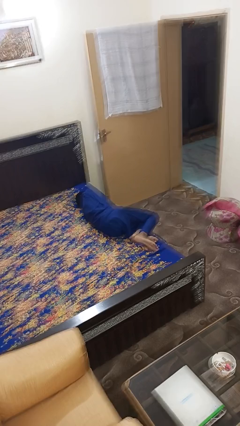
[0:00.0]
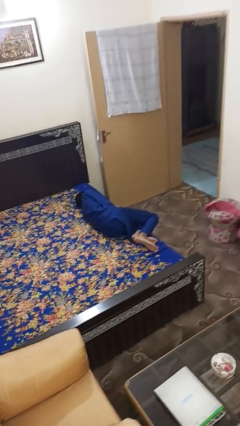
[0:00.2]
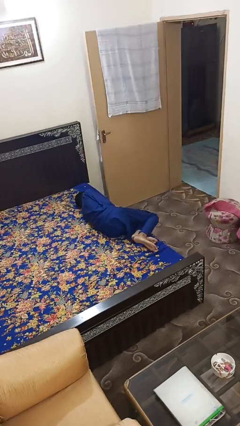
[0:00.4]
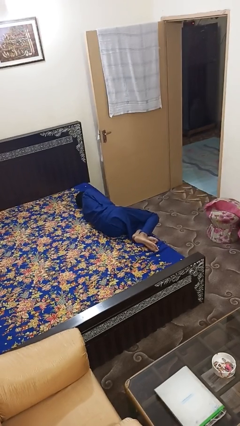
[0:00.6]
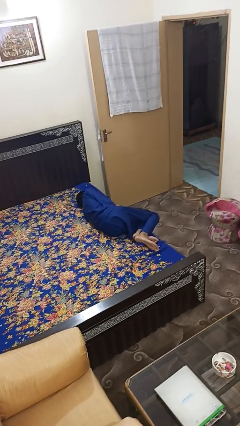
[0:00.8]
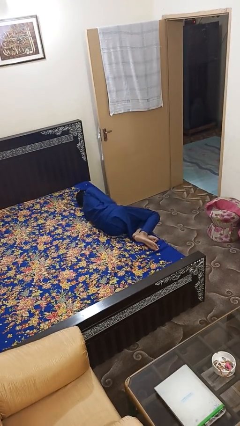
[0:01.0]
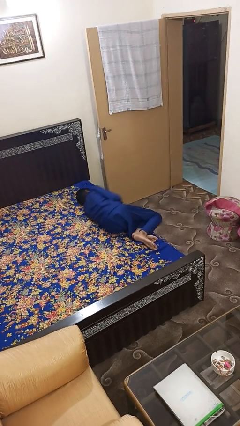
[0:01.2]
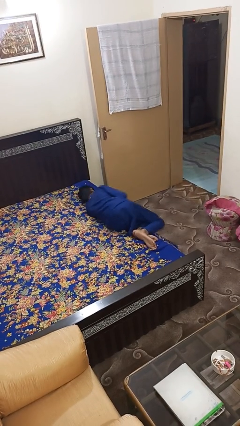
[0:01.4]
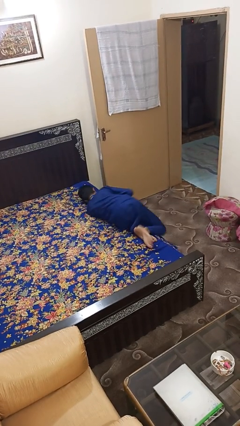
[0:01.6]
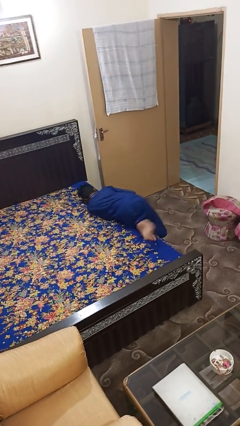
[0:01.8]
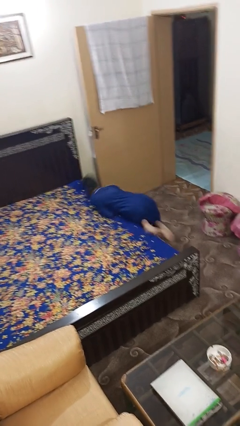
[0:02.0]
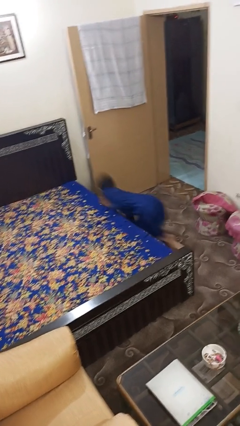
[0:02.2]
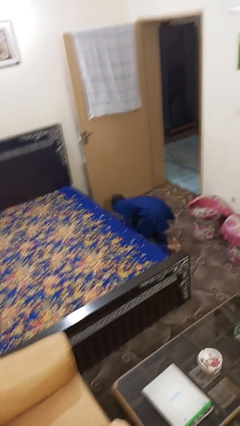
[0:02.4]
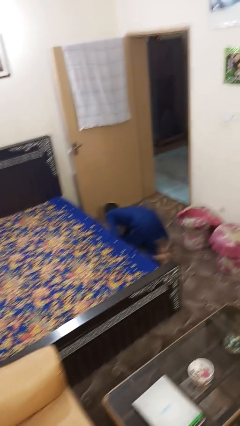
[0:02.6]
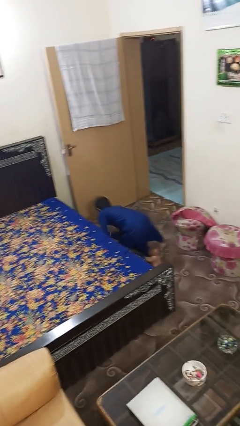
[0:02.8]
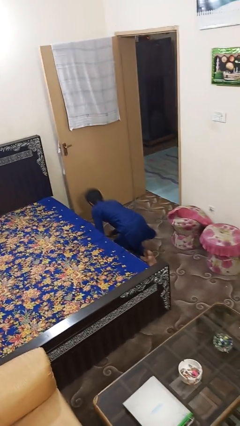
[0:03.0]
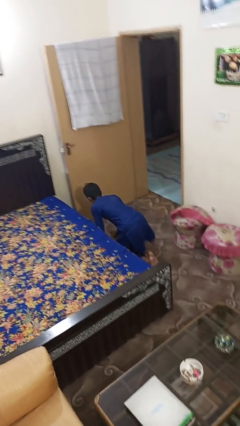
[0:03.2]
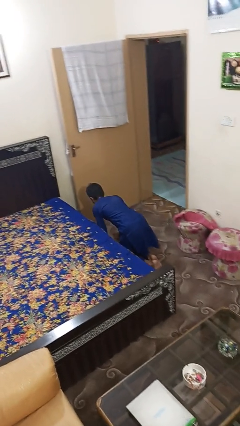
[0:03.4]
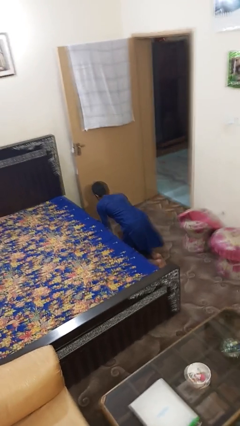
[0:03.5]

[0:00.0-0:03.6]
person falls from bed

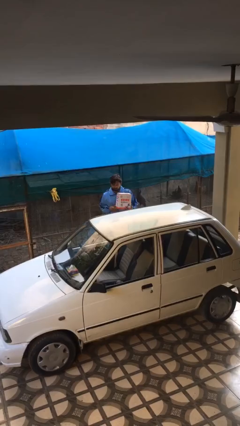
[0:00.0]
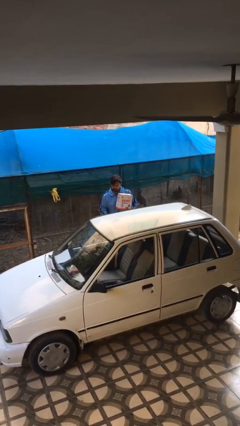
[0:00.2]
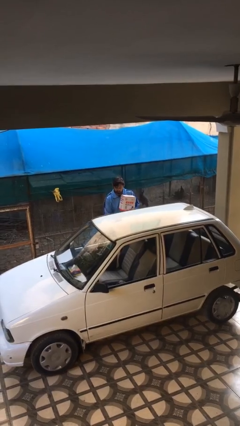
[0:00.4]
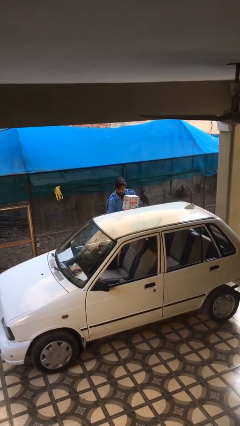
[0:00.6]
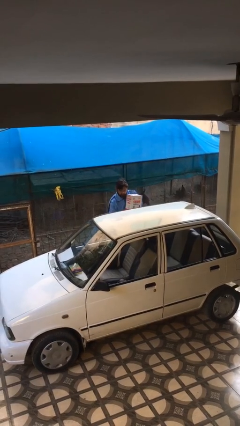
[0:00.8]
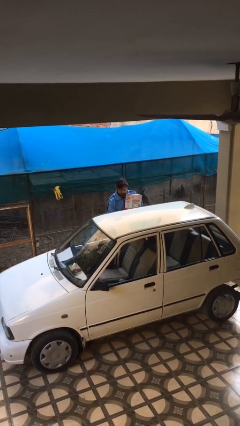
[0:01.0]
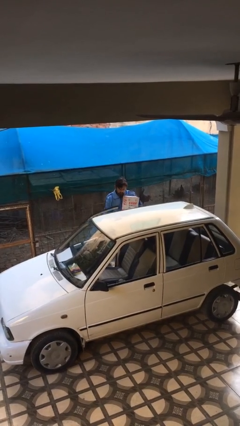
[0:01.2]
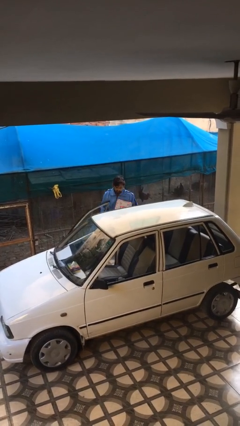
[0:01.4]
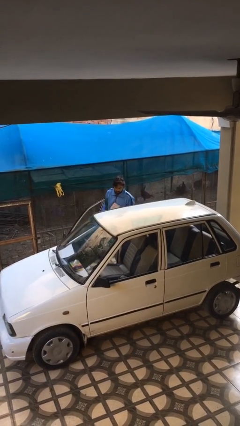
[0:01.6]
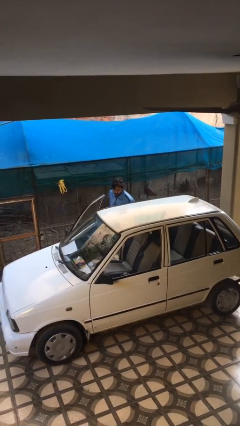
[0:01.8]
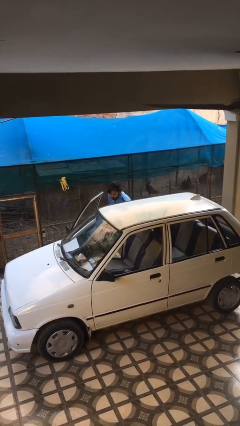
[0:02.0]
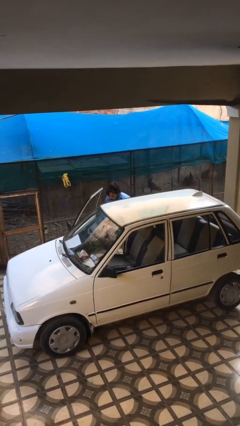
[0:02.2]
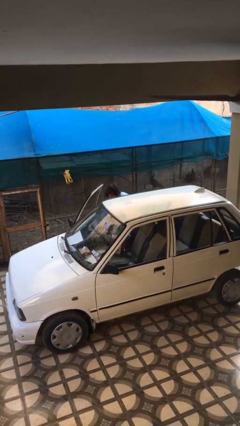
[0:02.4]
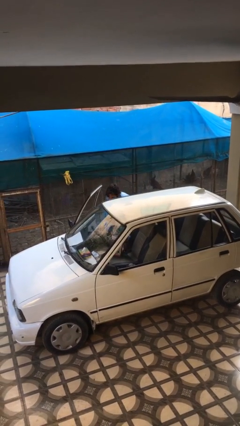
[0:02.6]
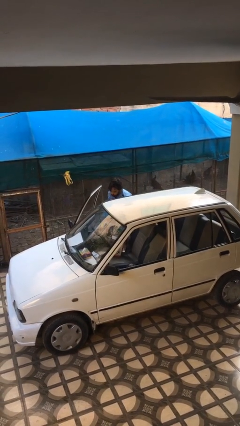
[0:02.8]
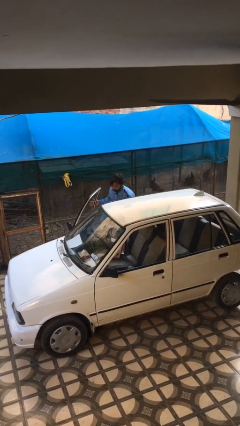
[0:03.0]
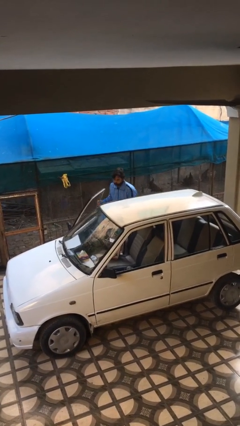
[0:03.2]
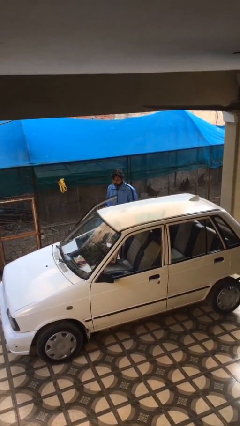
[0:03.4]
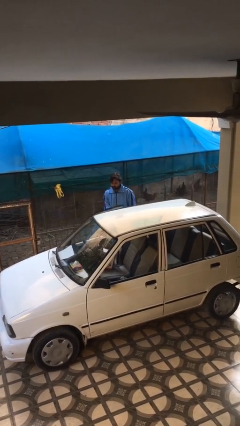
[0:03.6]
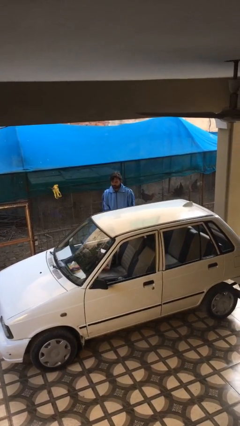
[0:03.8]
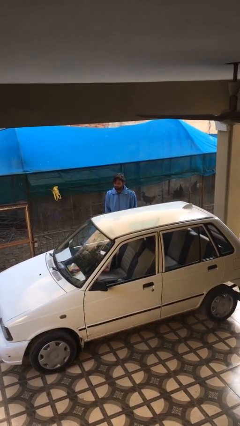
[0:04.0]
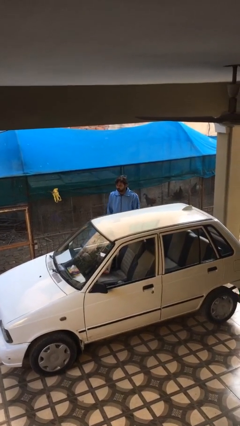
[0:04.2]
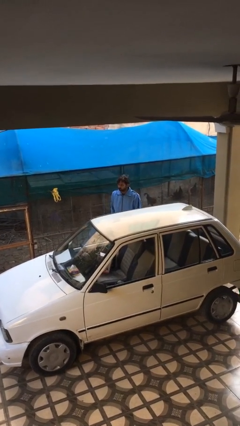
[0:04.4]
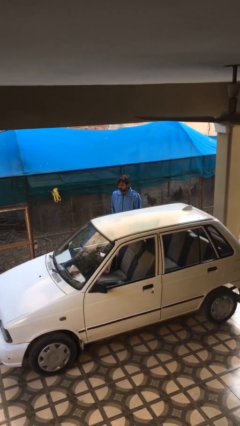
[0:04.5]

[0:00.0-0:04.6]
person loads car

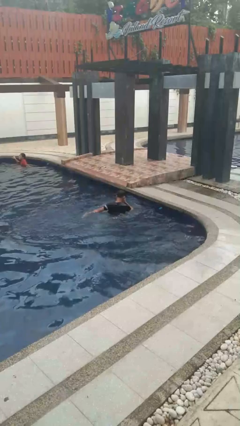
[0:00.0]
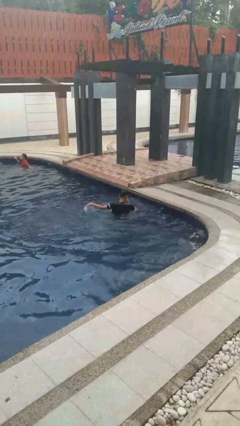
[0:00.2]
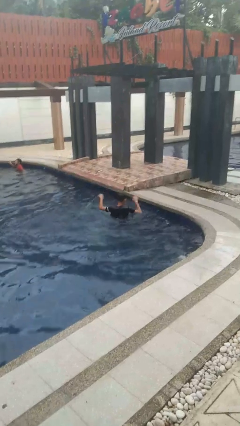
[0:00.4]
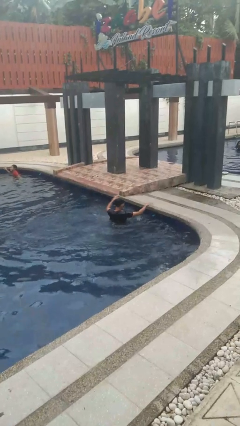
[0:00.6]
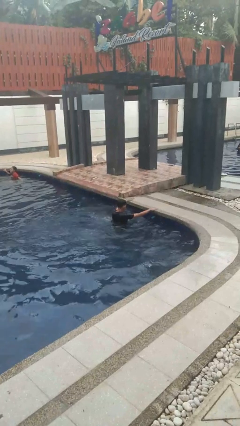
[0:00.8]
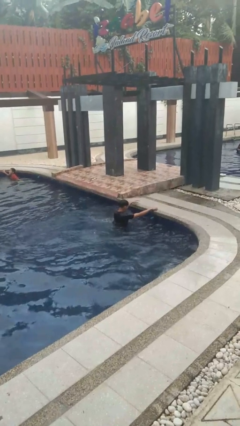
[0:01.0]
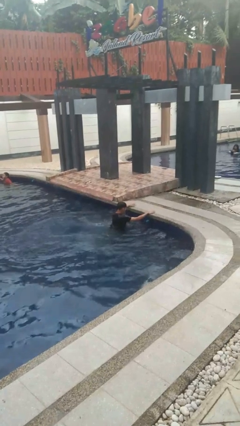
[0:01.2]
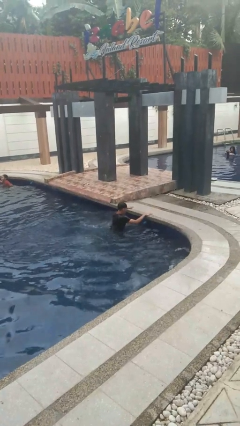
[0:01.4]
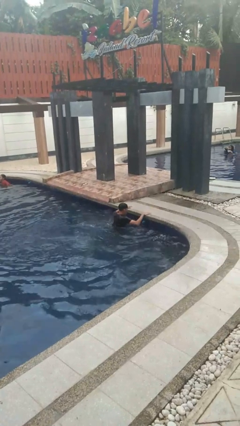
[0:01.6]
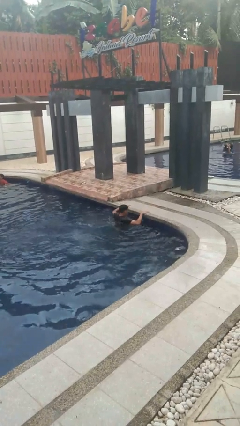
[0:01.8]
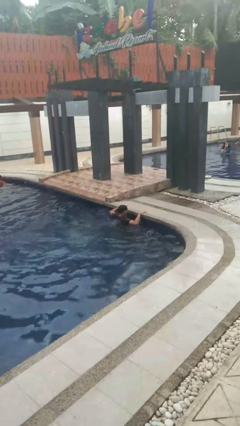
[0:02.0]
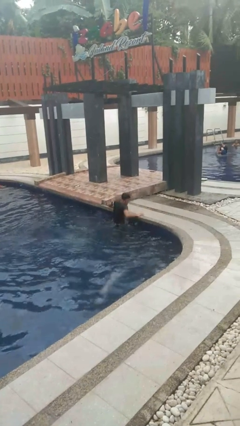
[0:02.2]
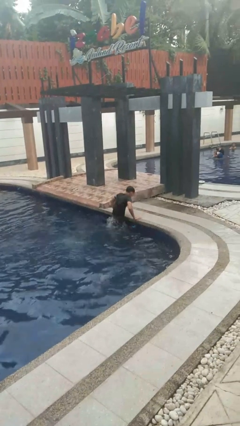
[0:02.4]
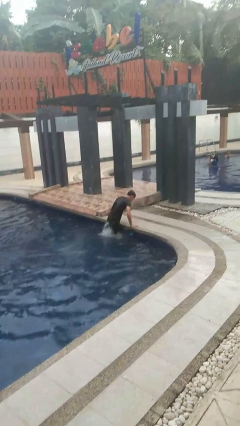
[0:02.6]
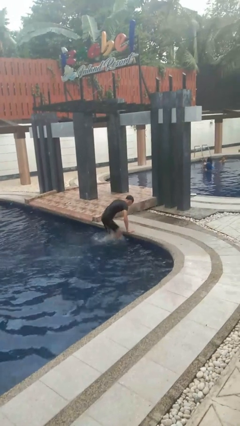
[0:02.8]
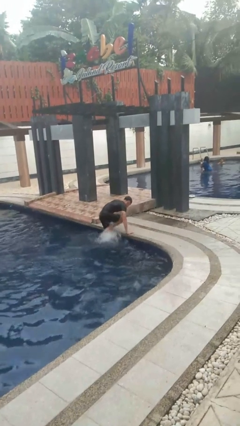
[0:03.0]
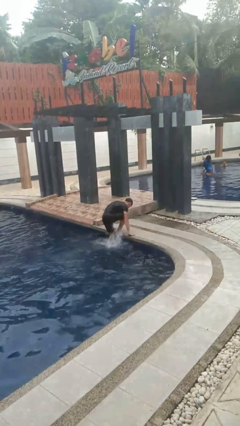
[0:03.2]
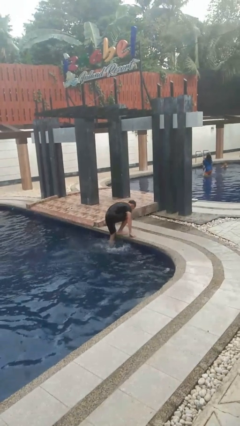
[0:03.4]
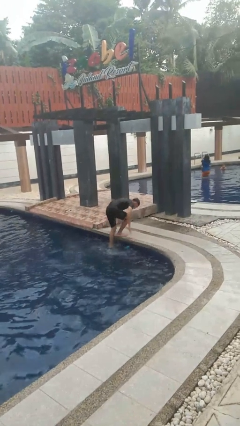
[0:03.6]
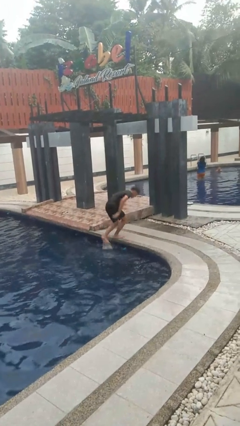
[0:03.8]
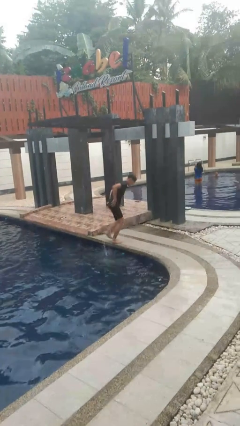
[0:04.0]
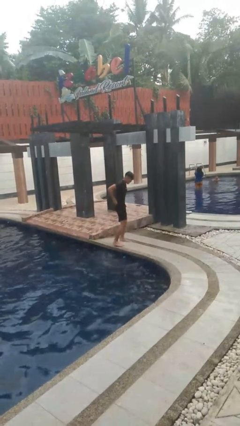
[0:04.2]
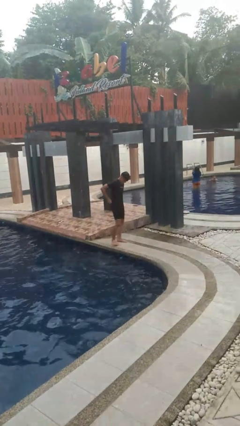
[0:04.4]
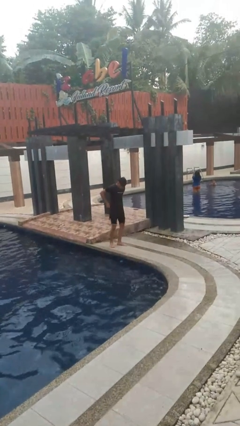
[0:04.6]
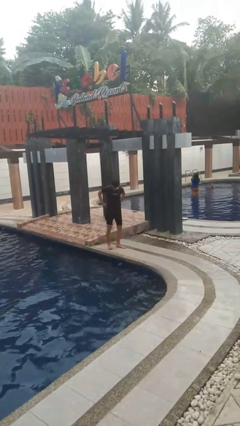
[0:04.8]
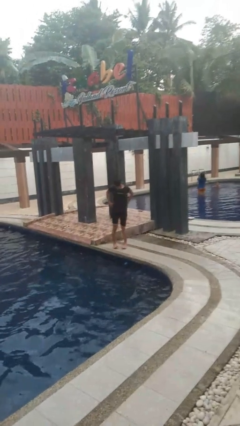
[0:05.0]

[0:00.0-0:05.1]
person exits pool

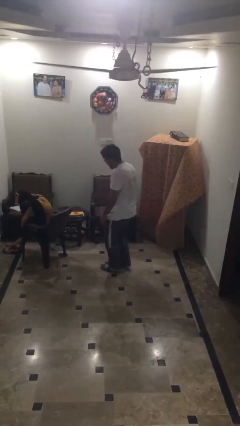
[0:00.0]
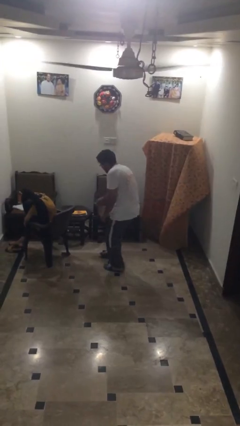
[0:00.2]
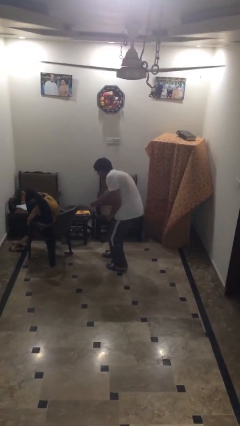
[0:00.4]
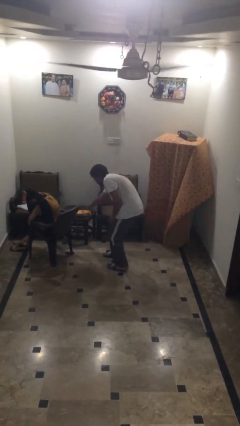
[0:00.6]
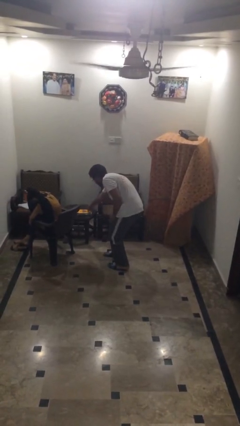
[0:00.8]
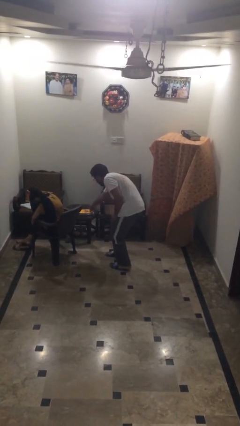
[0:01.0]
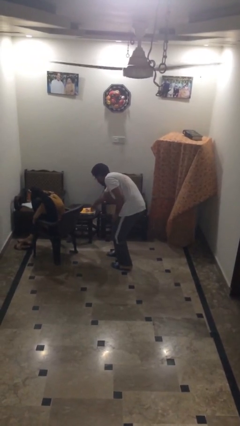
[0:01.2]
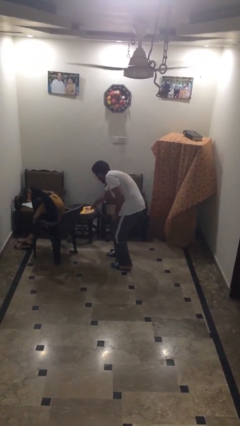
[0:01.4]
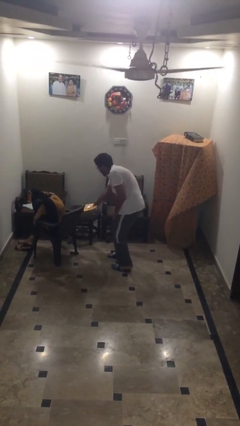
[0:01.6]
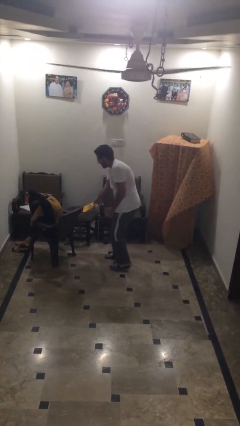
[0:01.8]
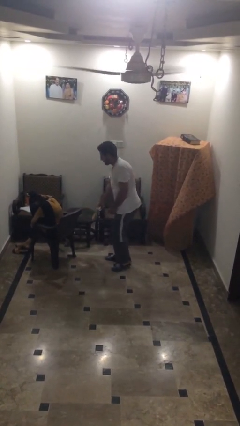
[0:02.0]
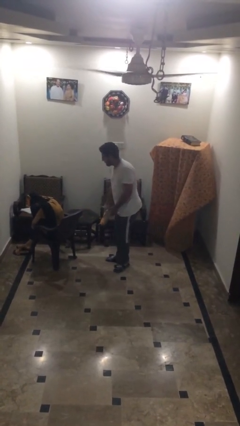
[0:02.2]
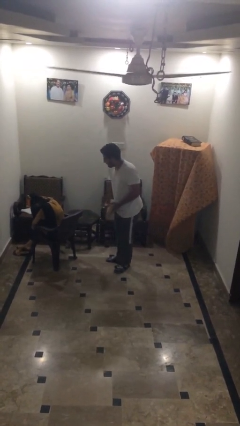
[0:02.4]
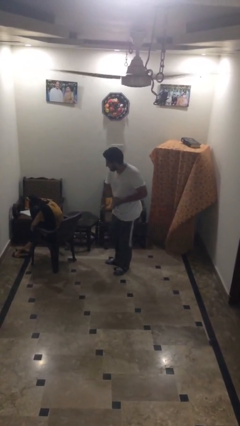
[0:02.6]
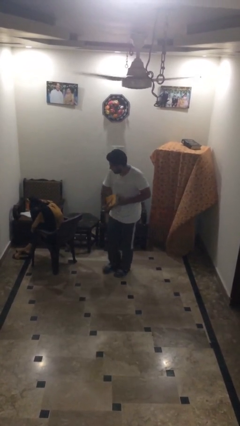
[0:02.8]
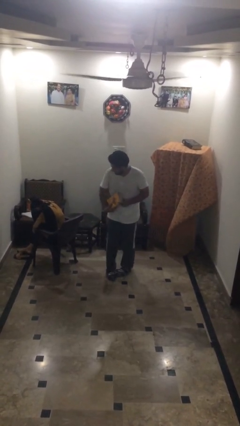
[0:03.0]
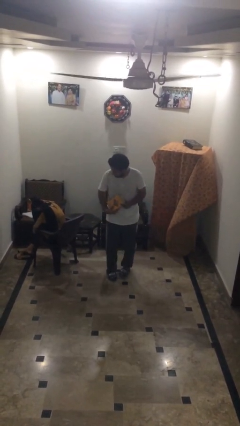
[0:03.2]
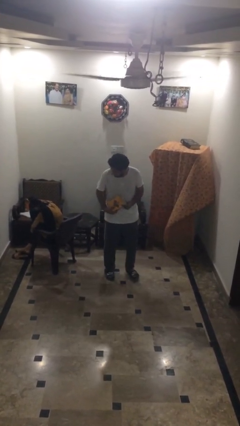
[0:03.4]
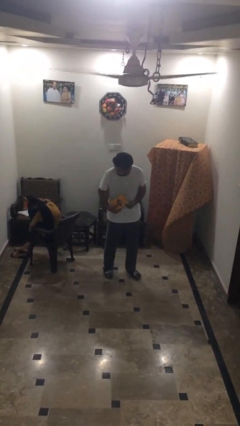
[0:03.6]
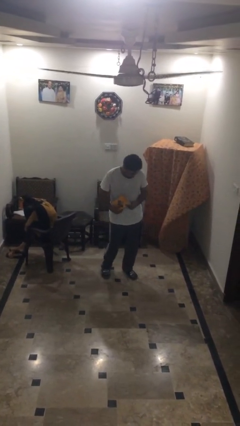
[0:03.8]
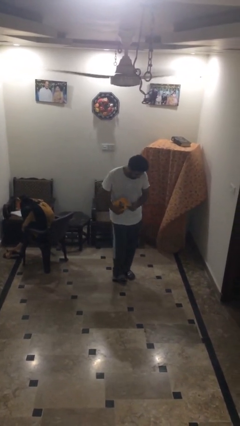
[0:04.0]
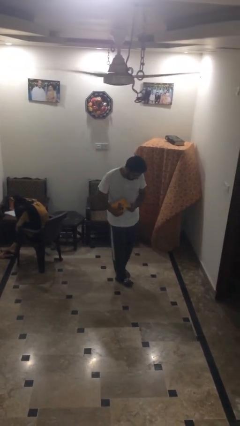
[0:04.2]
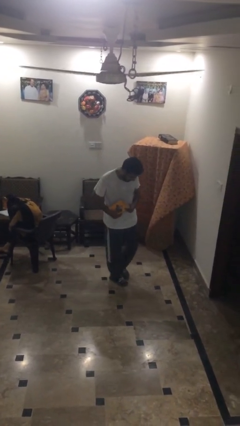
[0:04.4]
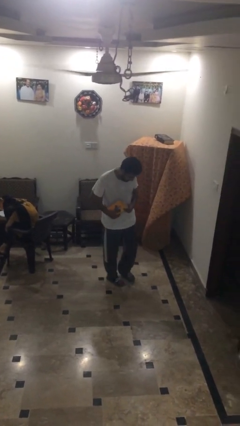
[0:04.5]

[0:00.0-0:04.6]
person steals object from person
